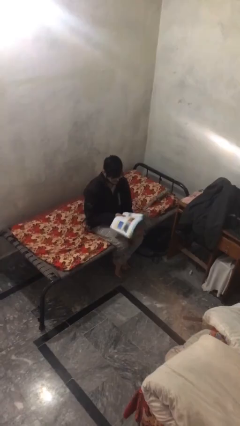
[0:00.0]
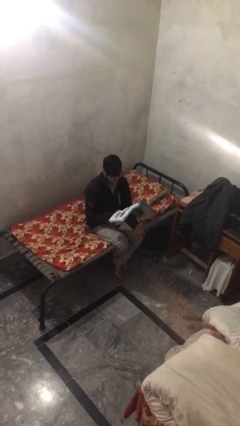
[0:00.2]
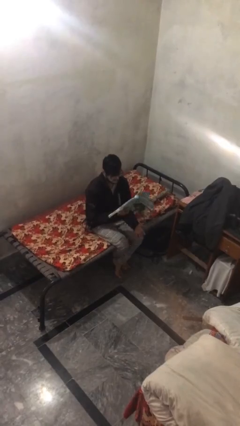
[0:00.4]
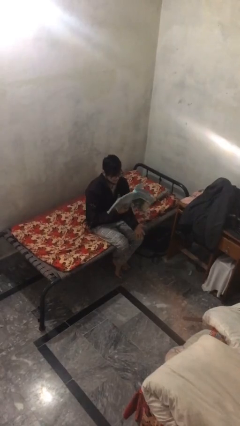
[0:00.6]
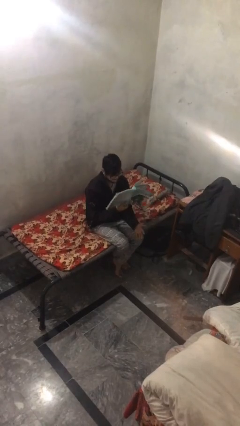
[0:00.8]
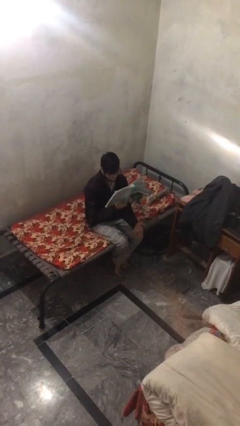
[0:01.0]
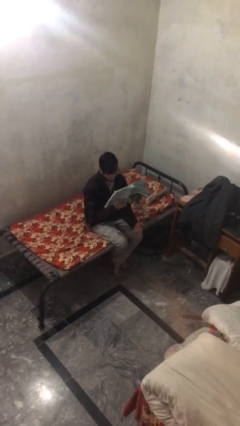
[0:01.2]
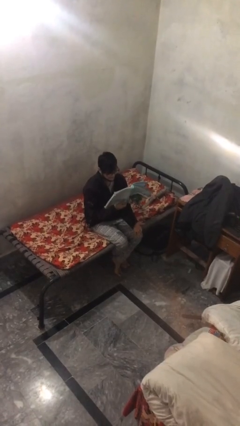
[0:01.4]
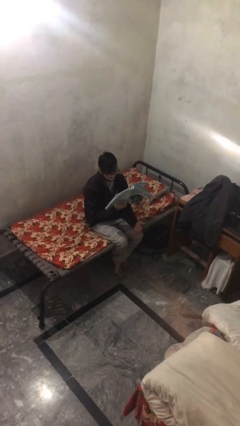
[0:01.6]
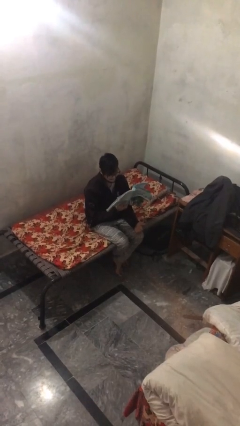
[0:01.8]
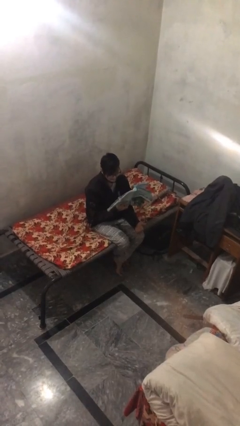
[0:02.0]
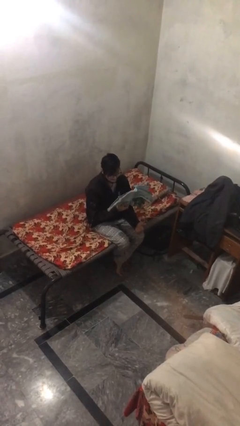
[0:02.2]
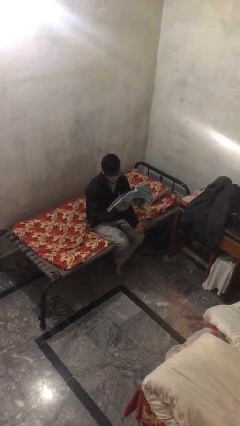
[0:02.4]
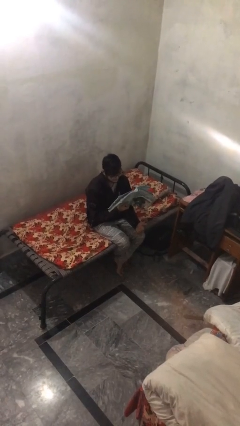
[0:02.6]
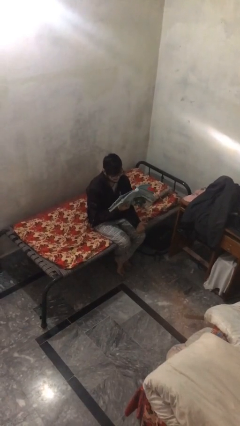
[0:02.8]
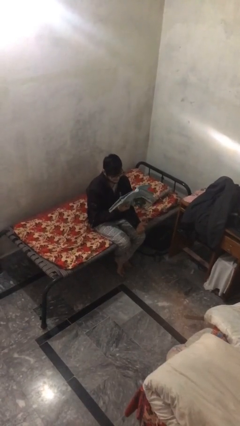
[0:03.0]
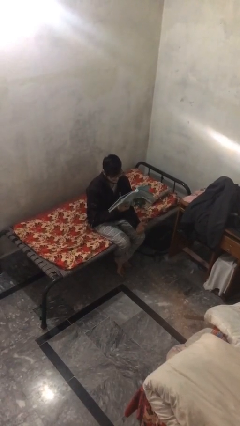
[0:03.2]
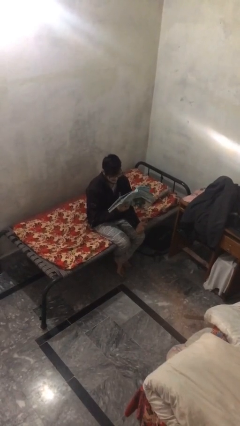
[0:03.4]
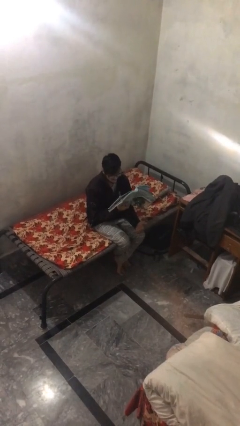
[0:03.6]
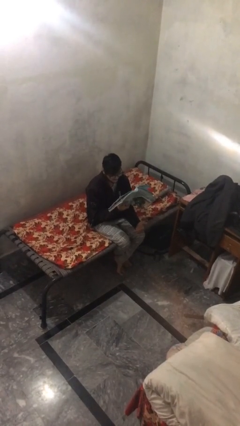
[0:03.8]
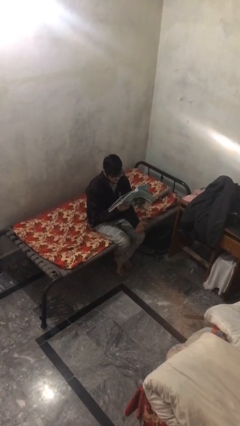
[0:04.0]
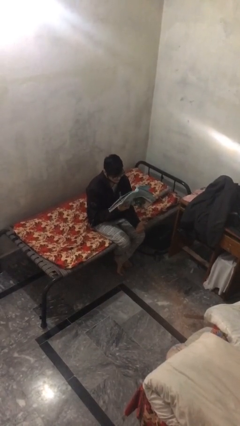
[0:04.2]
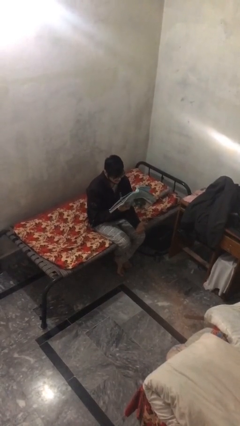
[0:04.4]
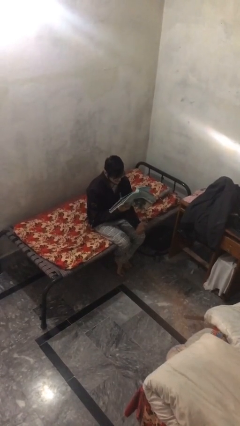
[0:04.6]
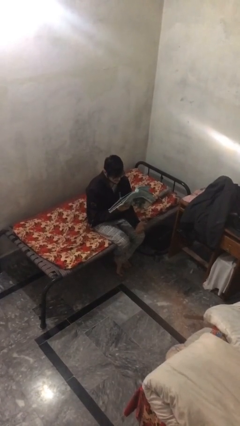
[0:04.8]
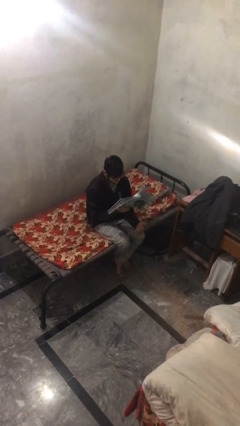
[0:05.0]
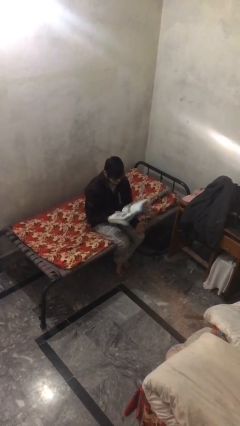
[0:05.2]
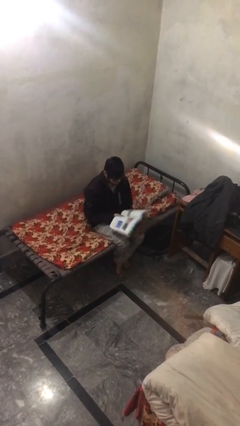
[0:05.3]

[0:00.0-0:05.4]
person reads document

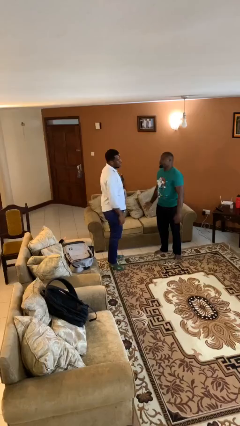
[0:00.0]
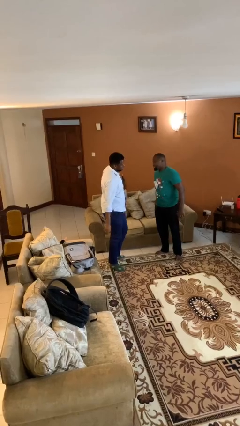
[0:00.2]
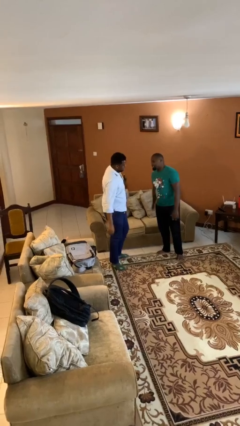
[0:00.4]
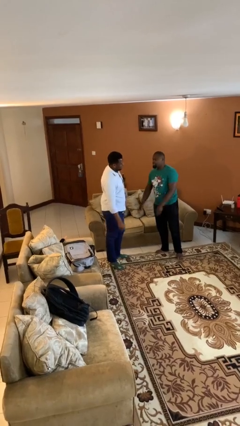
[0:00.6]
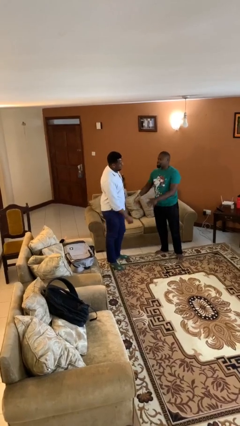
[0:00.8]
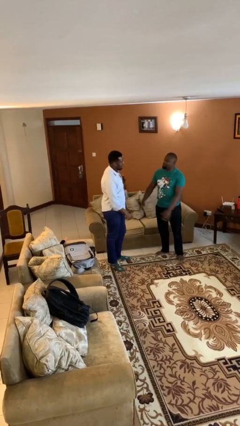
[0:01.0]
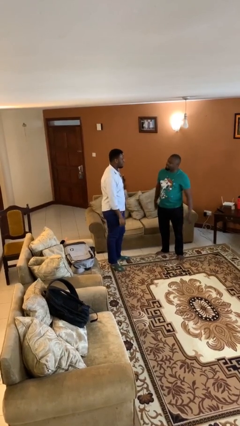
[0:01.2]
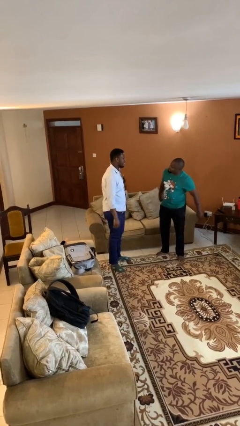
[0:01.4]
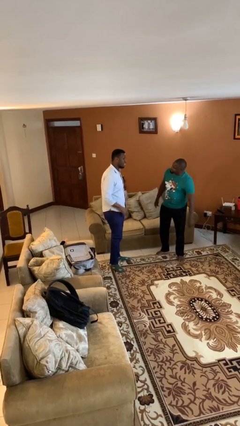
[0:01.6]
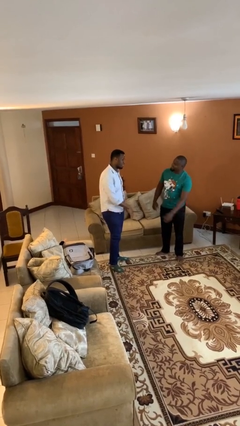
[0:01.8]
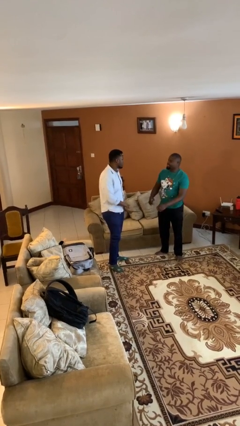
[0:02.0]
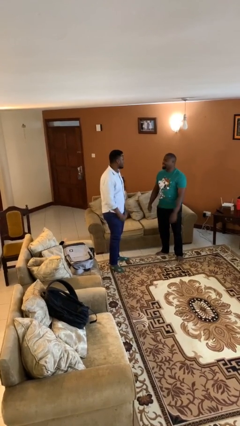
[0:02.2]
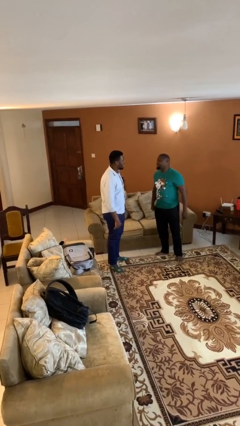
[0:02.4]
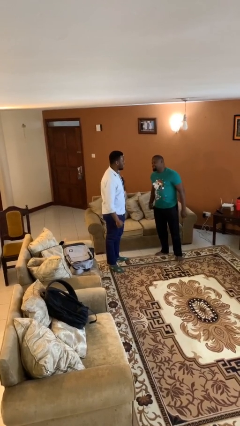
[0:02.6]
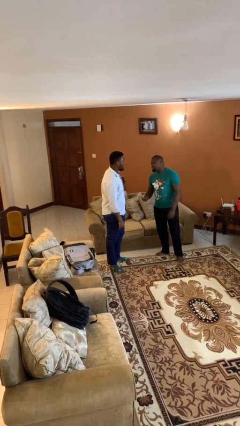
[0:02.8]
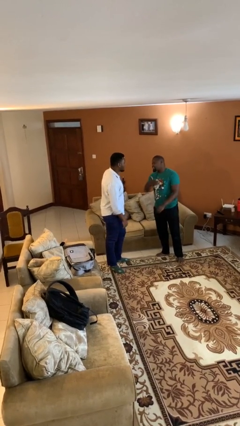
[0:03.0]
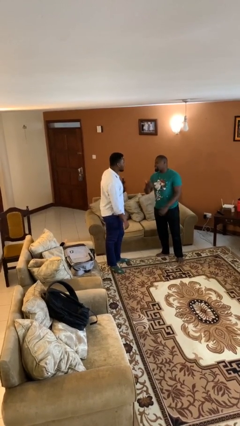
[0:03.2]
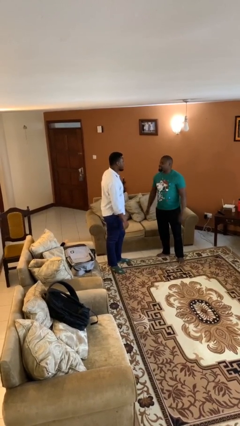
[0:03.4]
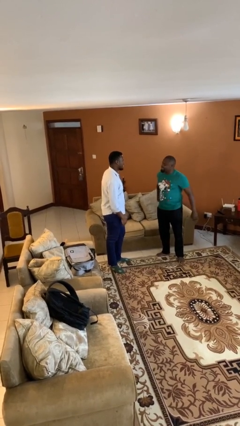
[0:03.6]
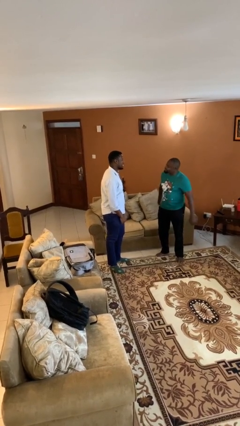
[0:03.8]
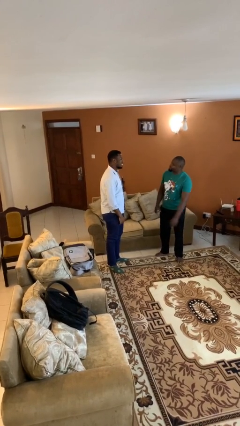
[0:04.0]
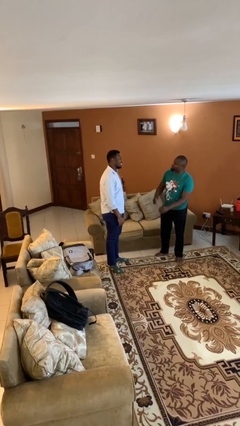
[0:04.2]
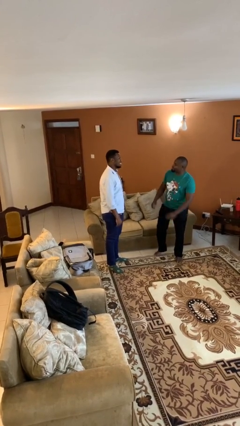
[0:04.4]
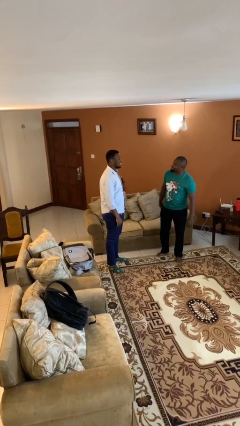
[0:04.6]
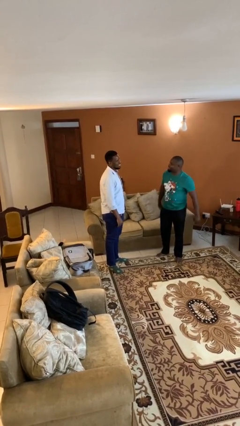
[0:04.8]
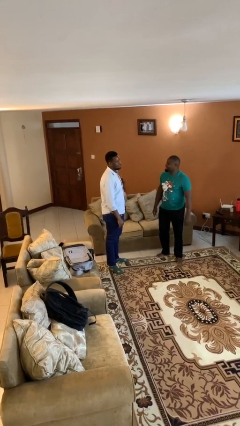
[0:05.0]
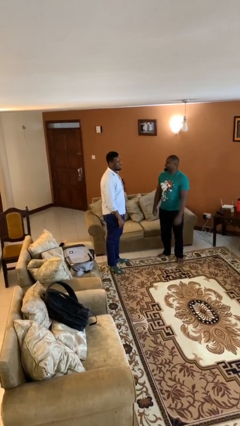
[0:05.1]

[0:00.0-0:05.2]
person talks to person

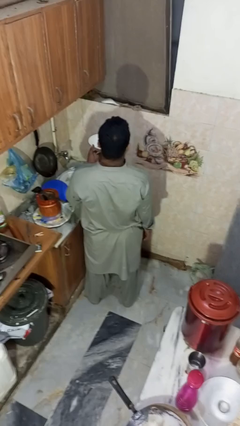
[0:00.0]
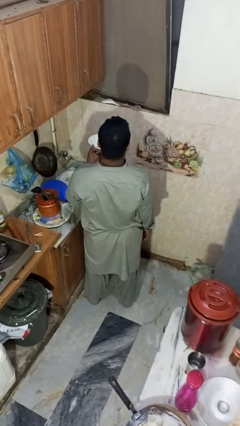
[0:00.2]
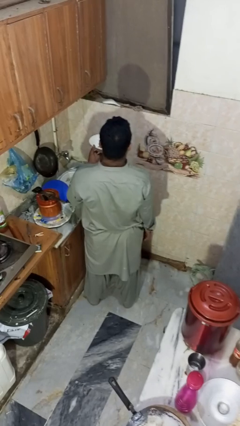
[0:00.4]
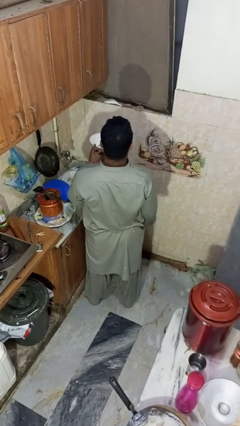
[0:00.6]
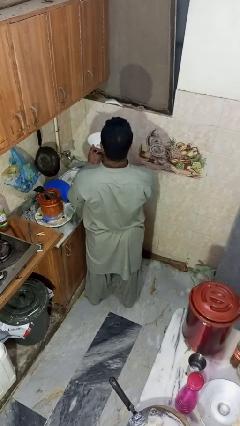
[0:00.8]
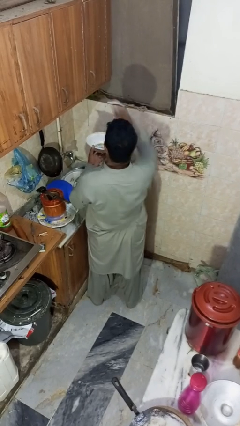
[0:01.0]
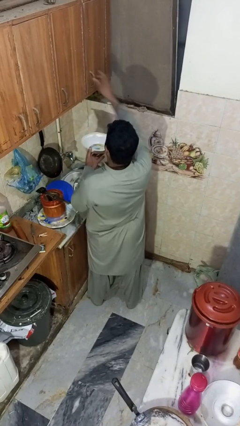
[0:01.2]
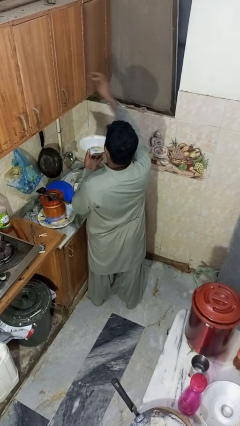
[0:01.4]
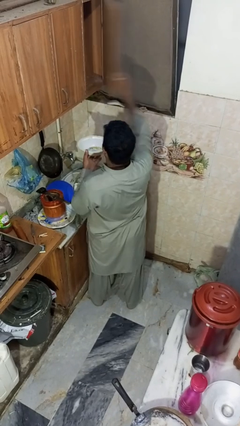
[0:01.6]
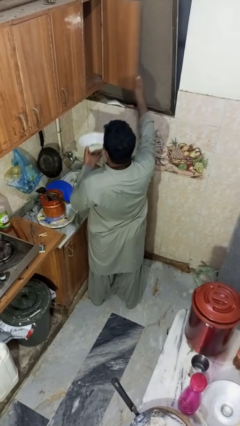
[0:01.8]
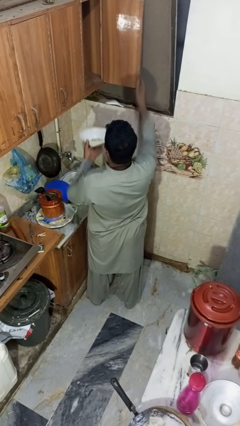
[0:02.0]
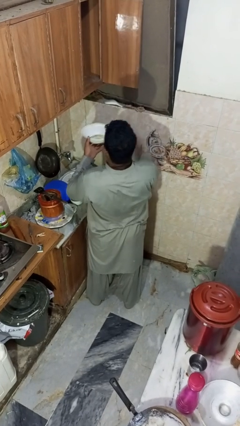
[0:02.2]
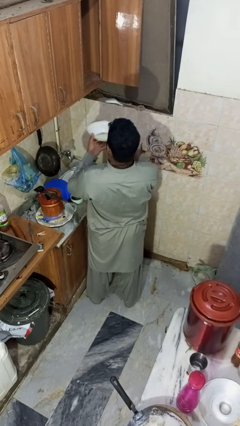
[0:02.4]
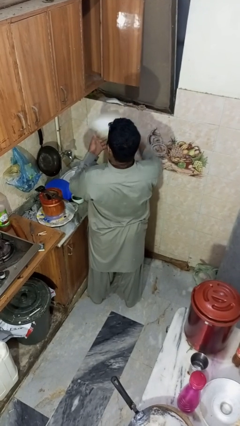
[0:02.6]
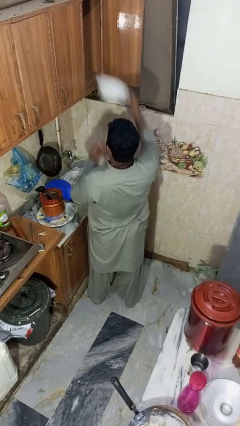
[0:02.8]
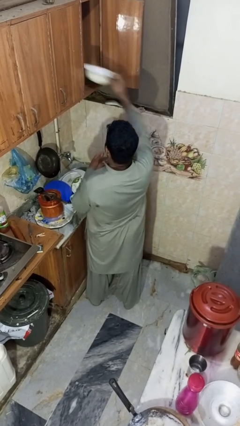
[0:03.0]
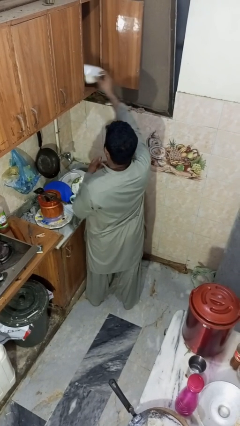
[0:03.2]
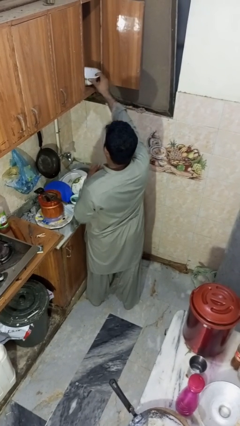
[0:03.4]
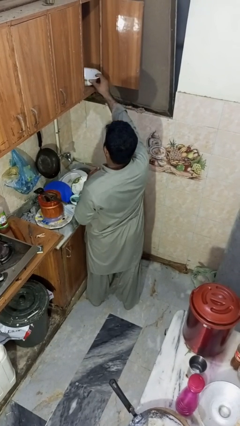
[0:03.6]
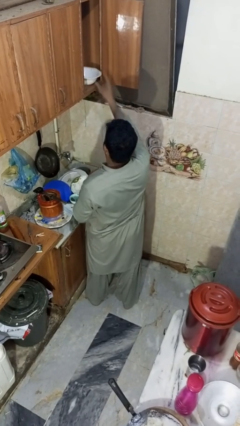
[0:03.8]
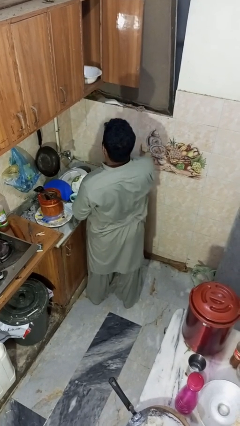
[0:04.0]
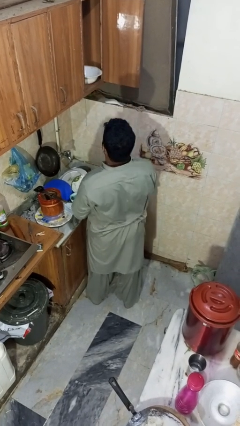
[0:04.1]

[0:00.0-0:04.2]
person puts object in cabinet

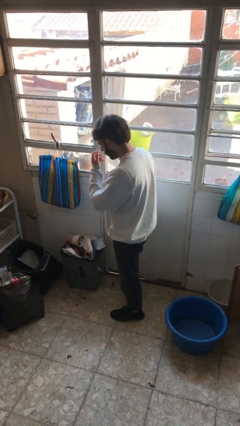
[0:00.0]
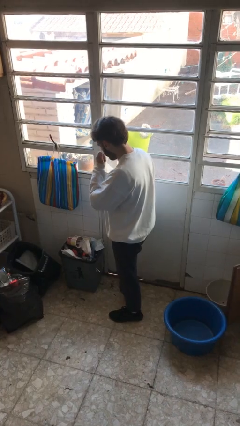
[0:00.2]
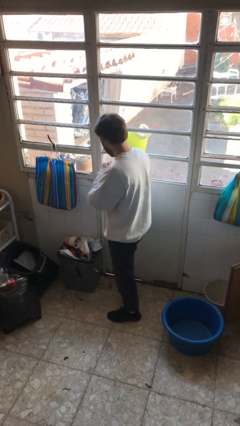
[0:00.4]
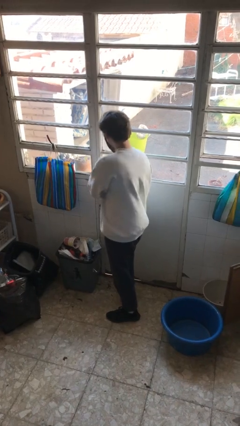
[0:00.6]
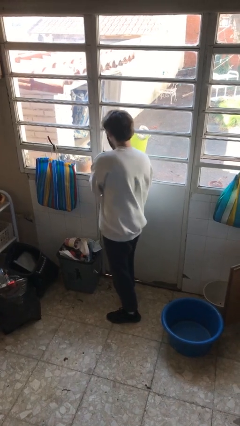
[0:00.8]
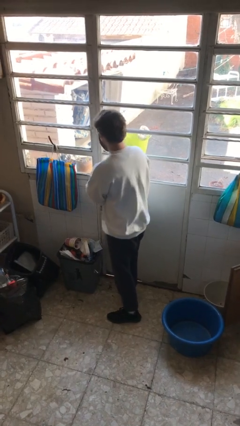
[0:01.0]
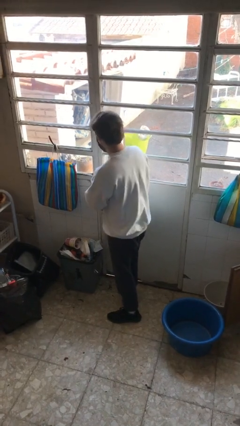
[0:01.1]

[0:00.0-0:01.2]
person unlocks door with keys

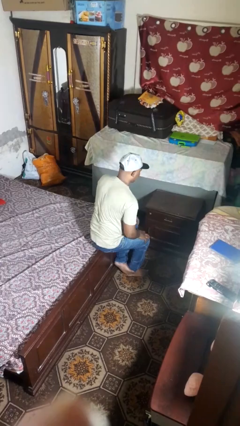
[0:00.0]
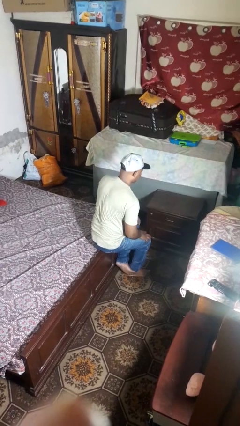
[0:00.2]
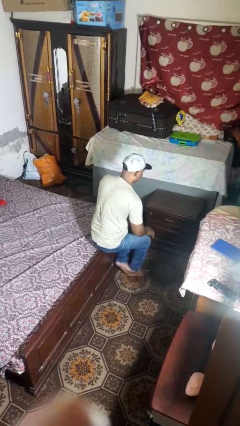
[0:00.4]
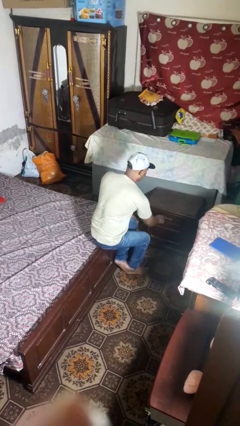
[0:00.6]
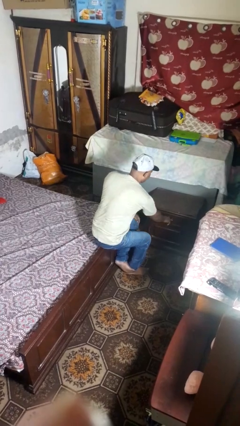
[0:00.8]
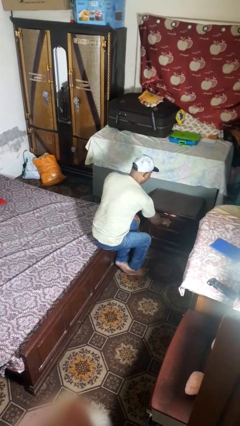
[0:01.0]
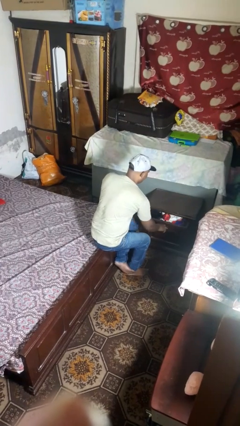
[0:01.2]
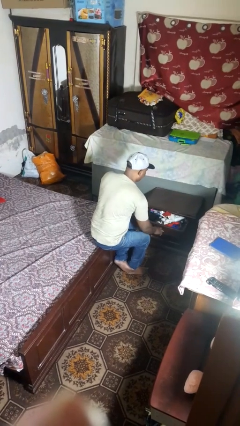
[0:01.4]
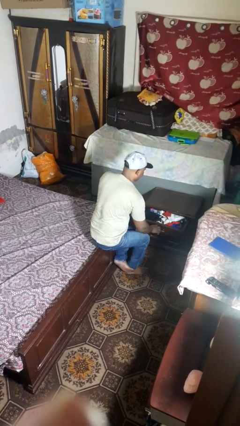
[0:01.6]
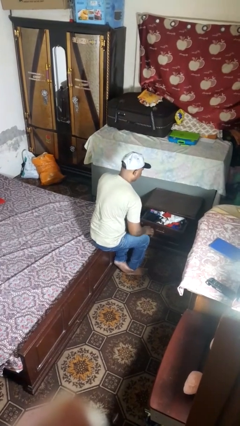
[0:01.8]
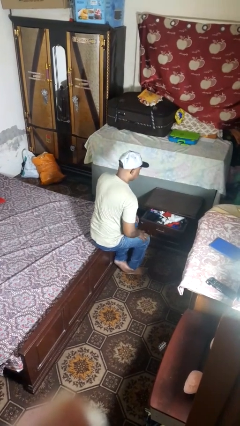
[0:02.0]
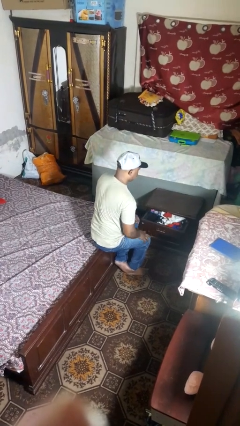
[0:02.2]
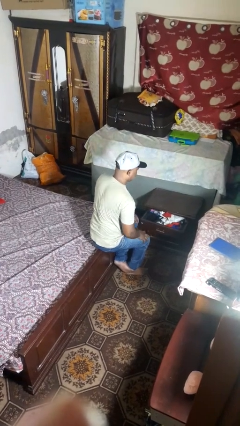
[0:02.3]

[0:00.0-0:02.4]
person opens dresser drawer
